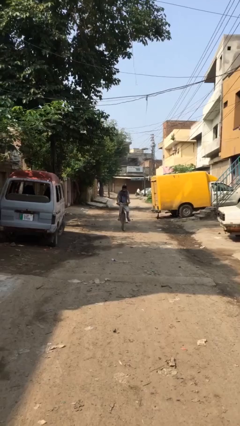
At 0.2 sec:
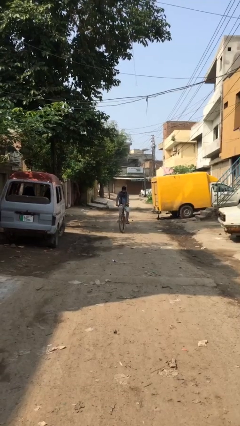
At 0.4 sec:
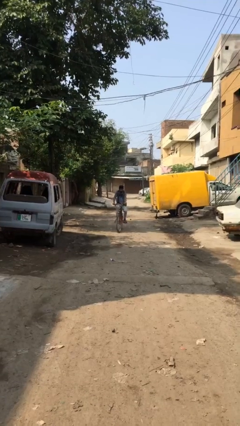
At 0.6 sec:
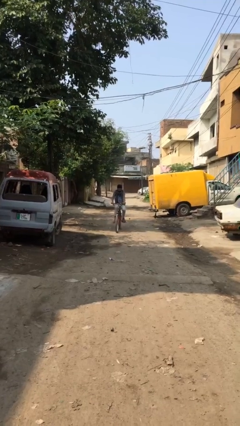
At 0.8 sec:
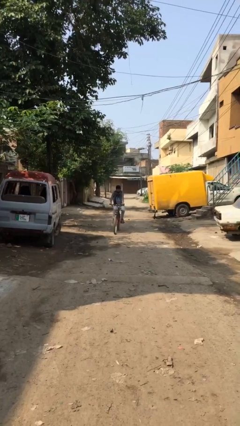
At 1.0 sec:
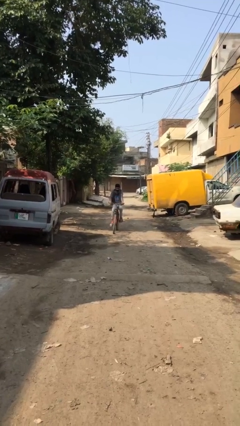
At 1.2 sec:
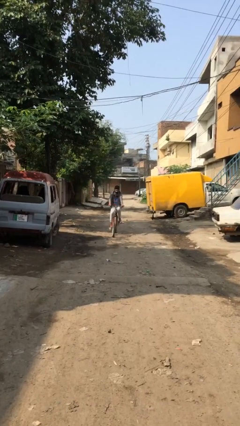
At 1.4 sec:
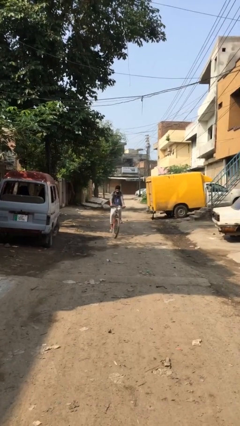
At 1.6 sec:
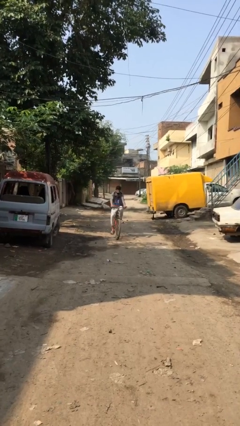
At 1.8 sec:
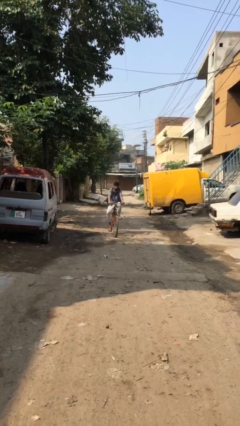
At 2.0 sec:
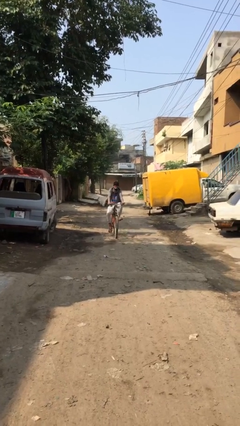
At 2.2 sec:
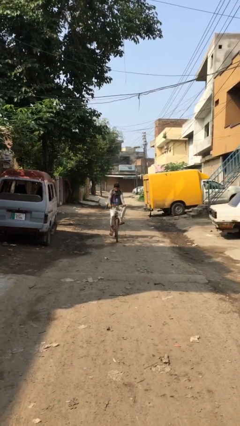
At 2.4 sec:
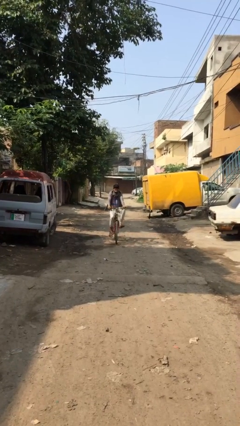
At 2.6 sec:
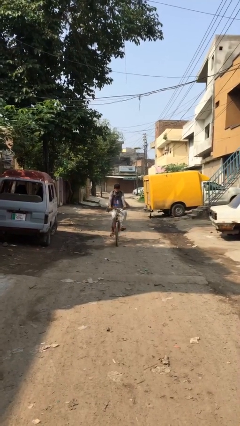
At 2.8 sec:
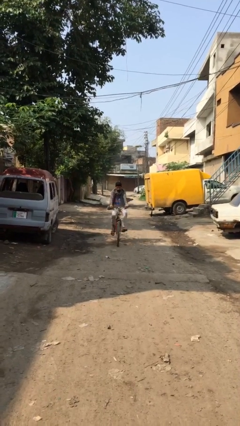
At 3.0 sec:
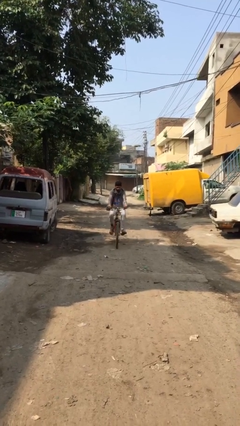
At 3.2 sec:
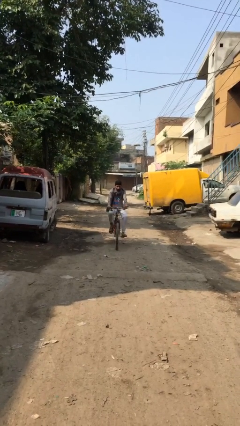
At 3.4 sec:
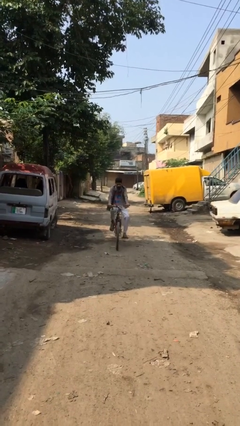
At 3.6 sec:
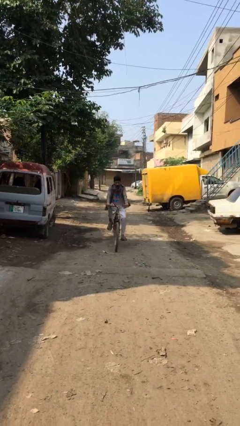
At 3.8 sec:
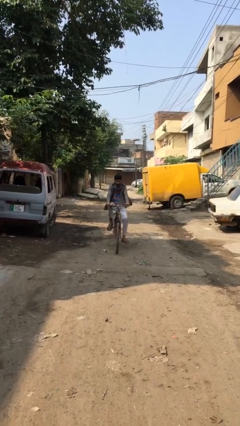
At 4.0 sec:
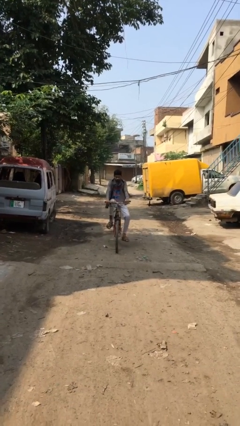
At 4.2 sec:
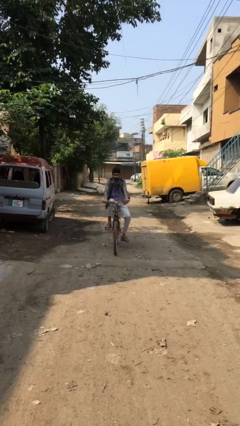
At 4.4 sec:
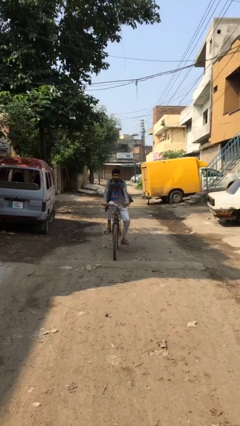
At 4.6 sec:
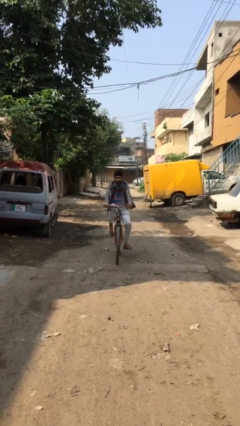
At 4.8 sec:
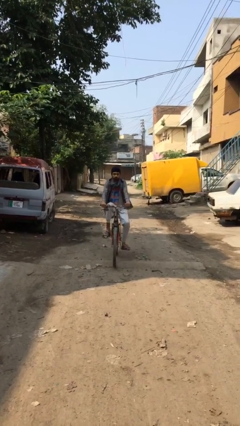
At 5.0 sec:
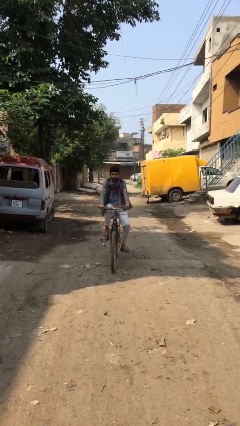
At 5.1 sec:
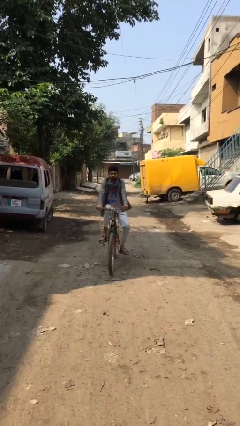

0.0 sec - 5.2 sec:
person rides bicycle

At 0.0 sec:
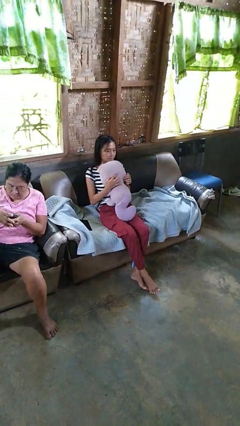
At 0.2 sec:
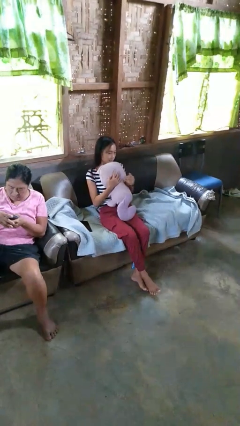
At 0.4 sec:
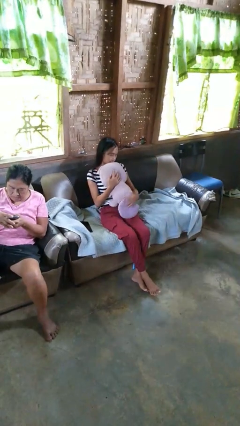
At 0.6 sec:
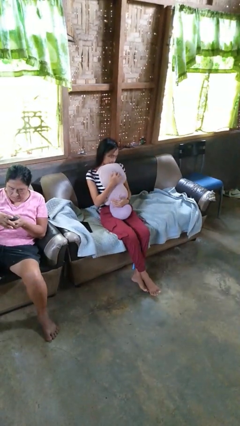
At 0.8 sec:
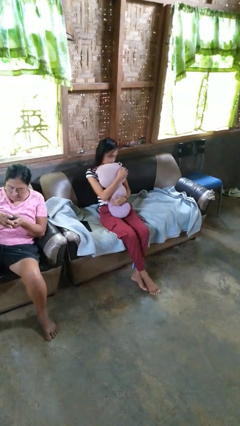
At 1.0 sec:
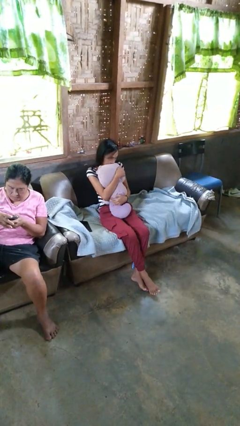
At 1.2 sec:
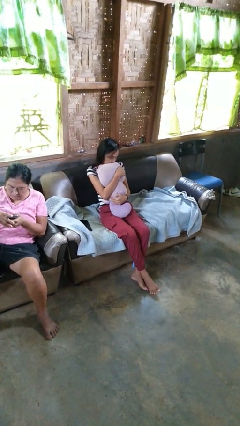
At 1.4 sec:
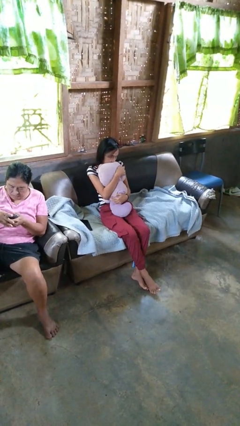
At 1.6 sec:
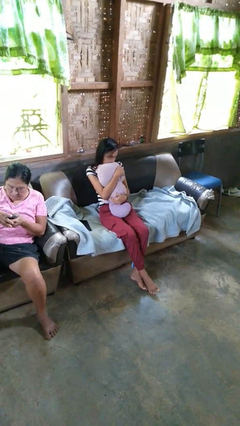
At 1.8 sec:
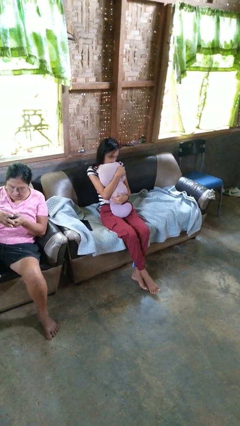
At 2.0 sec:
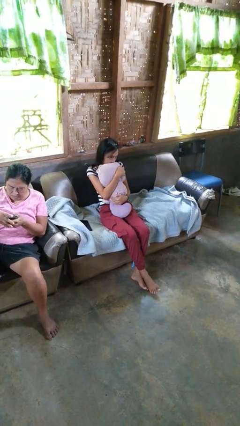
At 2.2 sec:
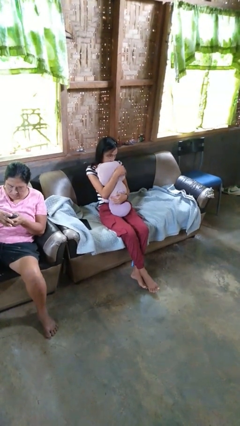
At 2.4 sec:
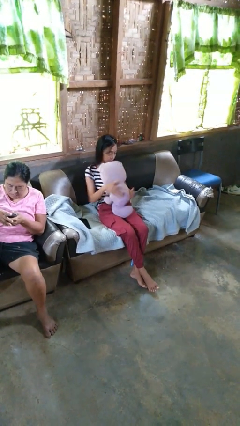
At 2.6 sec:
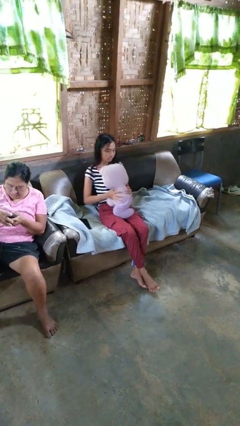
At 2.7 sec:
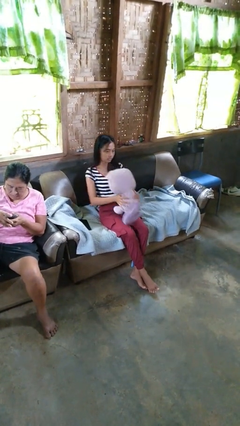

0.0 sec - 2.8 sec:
person hugs stuffed animal

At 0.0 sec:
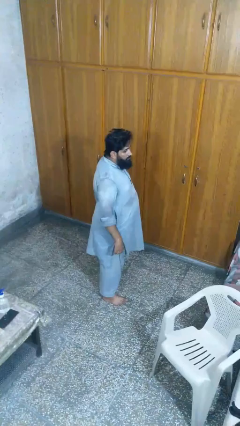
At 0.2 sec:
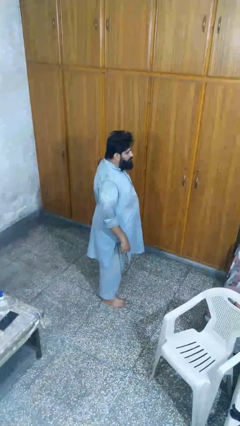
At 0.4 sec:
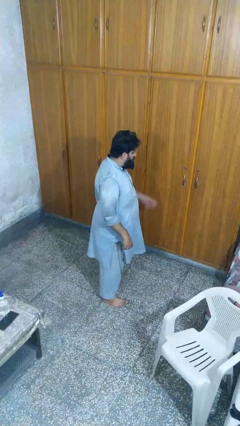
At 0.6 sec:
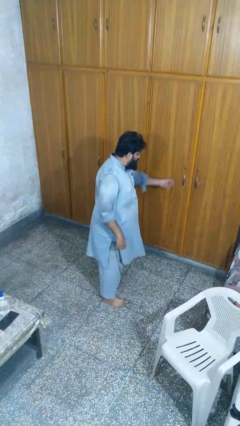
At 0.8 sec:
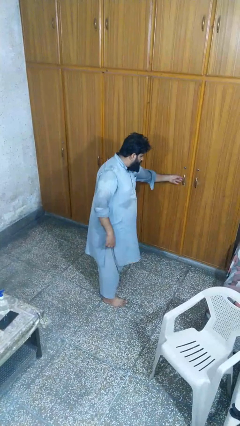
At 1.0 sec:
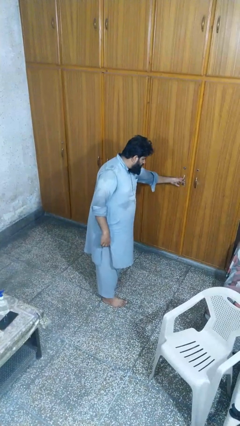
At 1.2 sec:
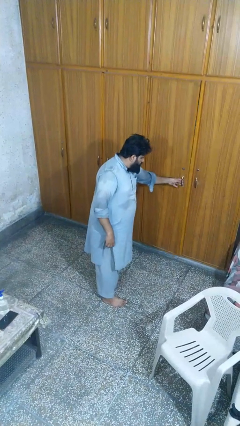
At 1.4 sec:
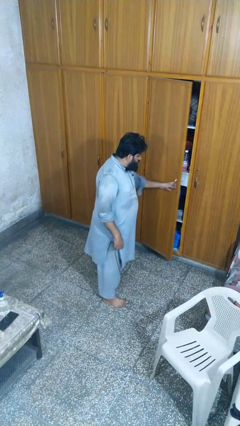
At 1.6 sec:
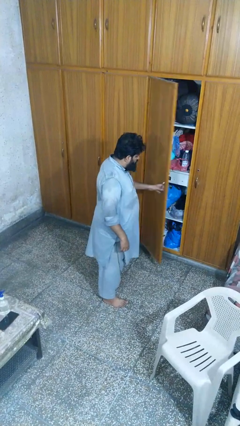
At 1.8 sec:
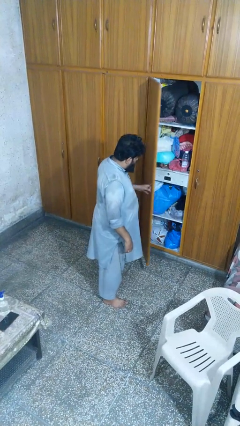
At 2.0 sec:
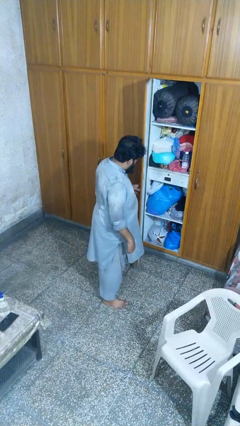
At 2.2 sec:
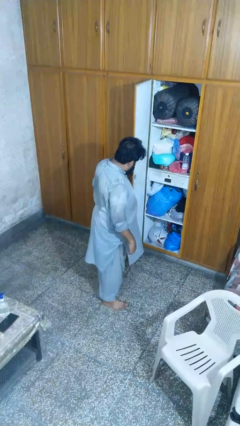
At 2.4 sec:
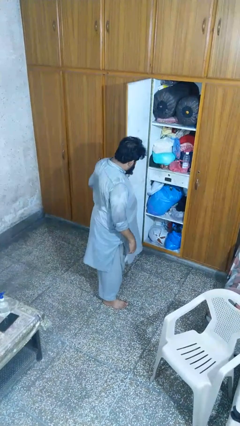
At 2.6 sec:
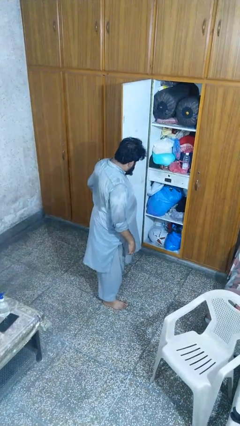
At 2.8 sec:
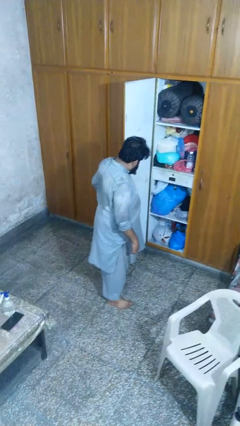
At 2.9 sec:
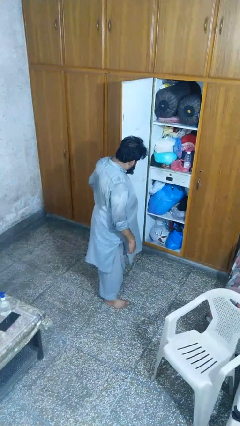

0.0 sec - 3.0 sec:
person opens closet door

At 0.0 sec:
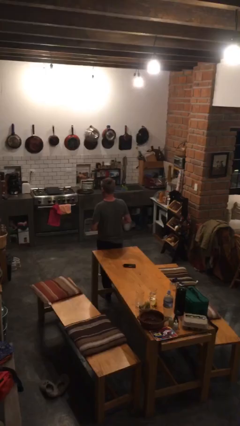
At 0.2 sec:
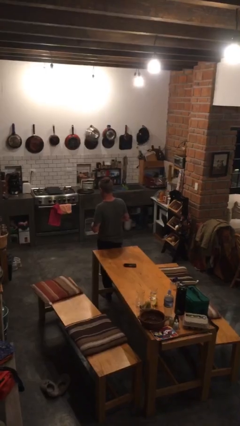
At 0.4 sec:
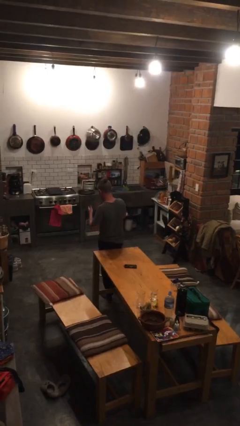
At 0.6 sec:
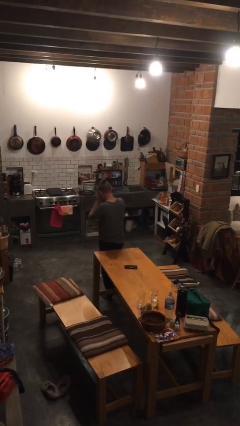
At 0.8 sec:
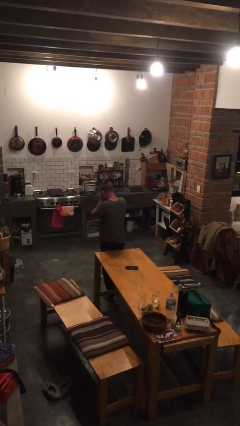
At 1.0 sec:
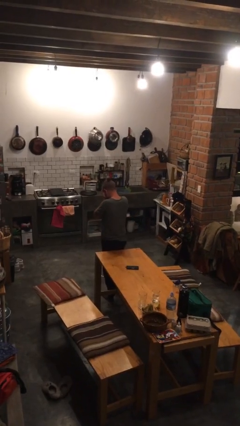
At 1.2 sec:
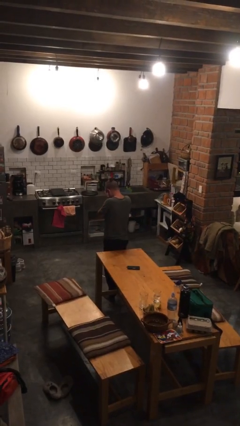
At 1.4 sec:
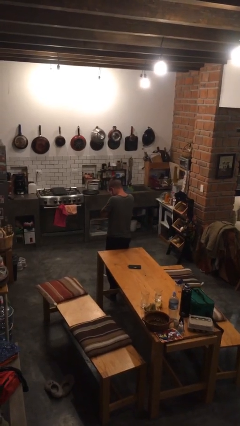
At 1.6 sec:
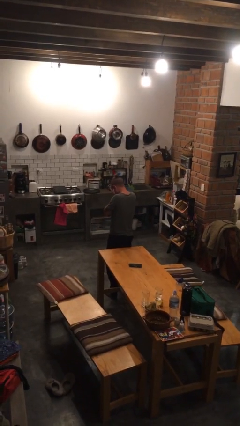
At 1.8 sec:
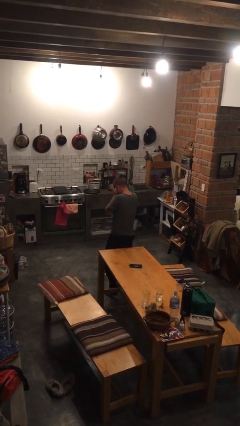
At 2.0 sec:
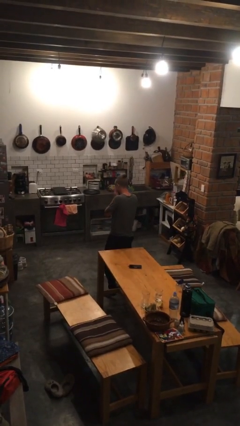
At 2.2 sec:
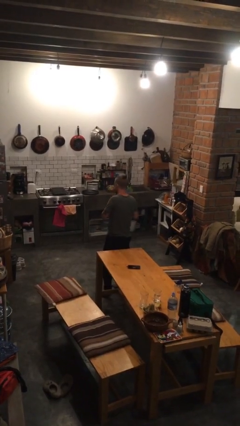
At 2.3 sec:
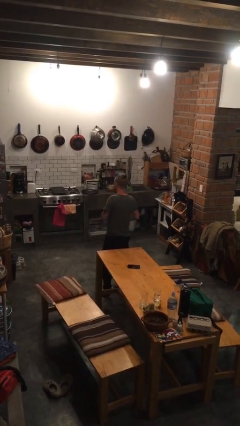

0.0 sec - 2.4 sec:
person covers face with hands

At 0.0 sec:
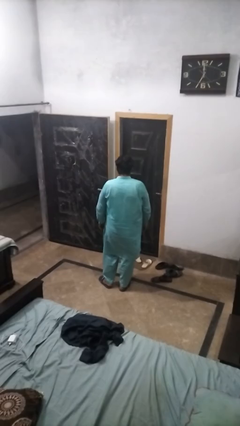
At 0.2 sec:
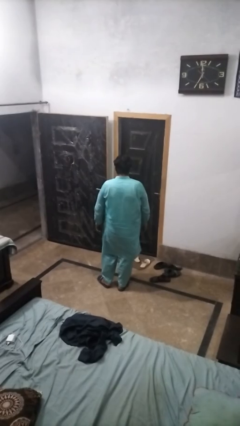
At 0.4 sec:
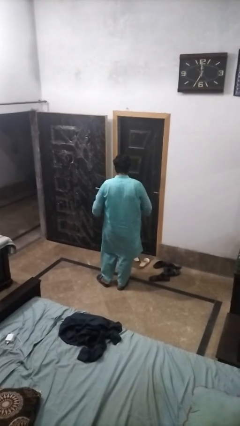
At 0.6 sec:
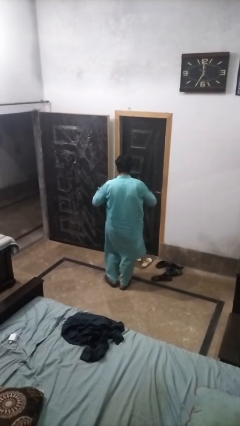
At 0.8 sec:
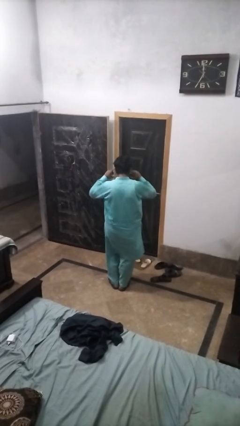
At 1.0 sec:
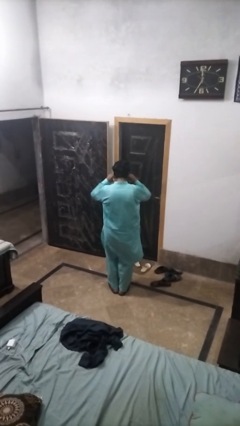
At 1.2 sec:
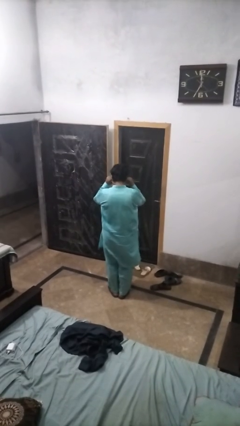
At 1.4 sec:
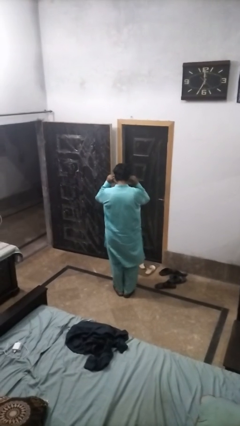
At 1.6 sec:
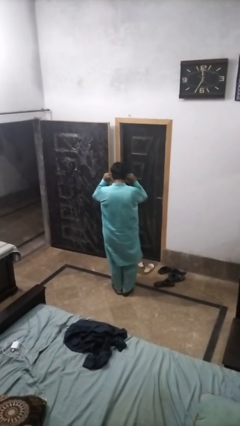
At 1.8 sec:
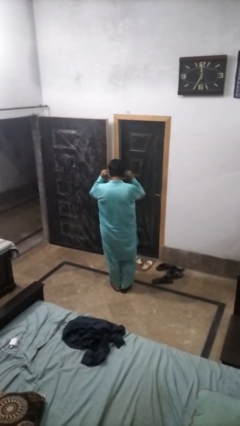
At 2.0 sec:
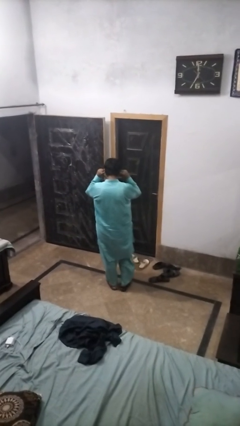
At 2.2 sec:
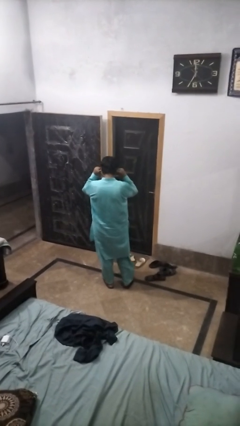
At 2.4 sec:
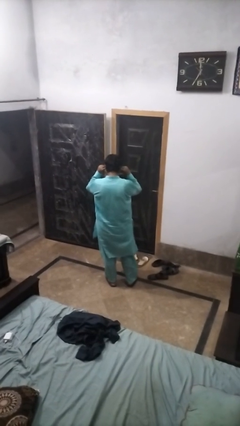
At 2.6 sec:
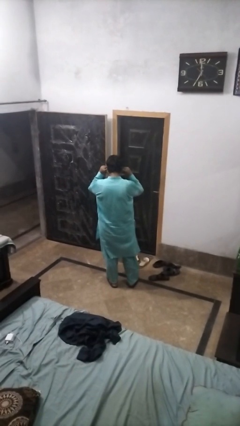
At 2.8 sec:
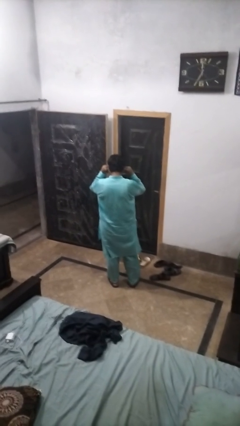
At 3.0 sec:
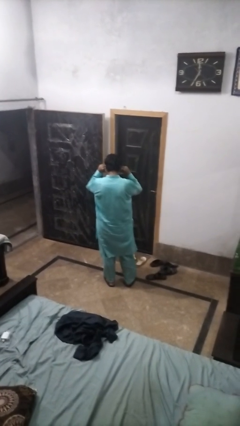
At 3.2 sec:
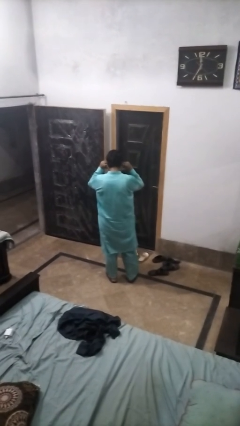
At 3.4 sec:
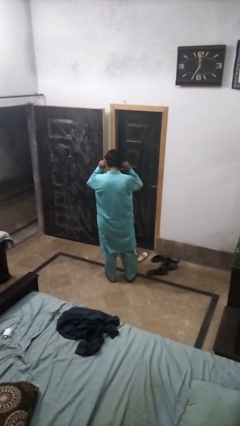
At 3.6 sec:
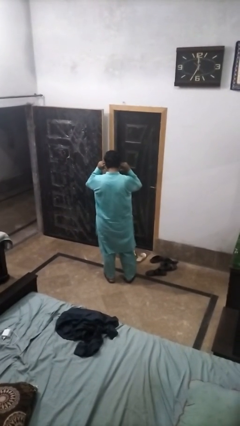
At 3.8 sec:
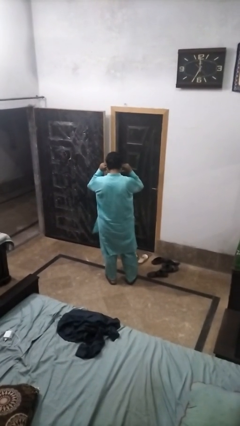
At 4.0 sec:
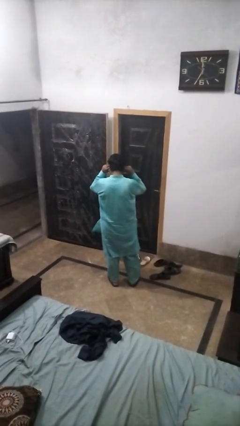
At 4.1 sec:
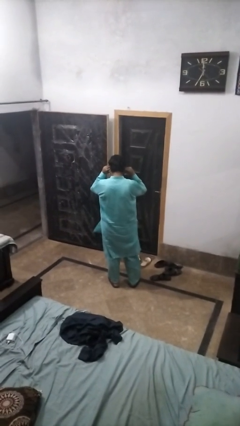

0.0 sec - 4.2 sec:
person puts fingers in ear
